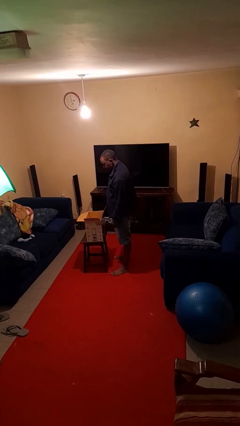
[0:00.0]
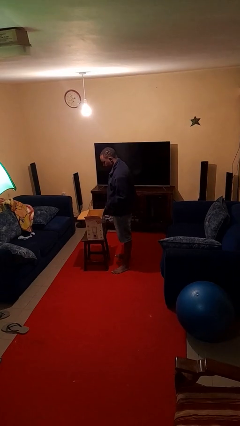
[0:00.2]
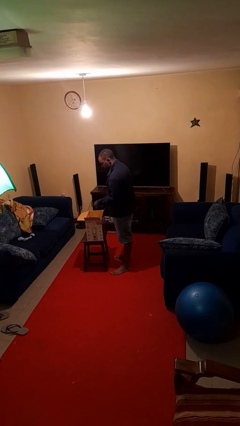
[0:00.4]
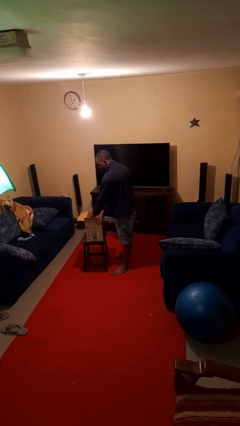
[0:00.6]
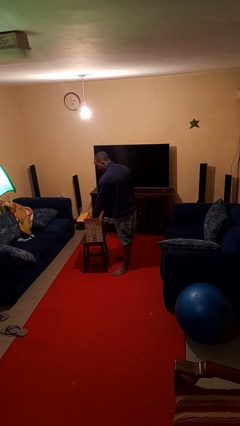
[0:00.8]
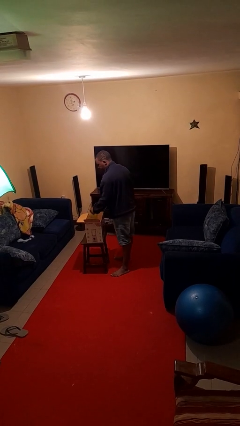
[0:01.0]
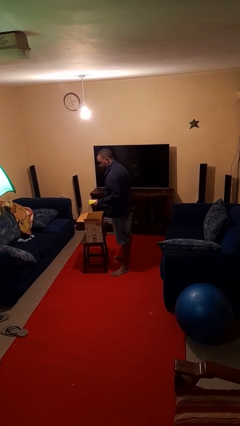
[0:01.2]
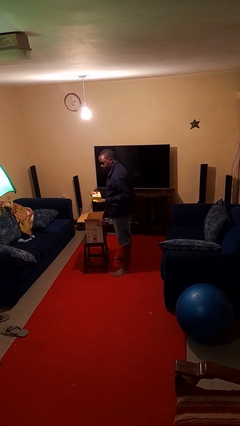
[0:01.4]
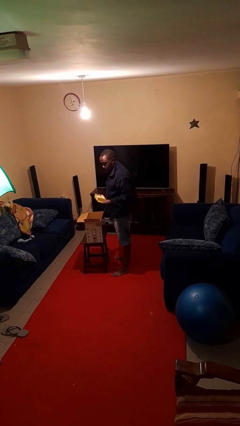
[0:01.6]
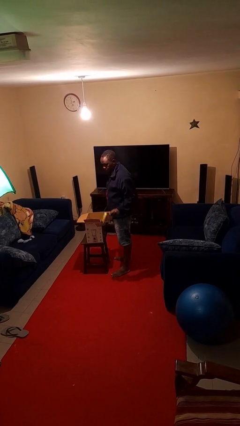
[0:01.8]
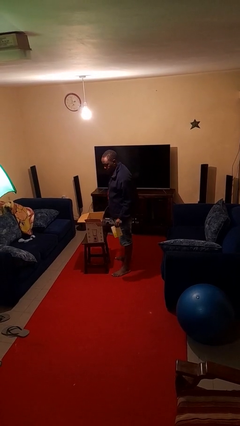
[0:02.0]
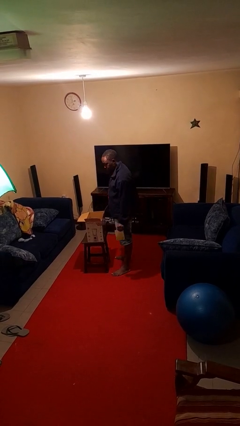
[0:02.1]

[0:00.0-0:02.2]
person takes object from box

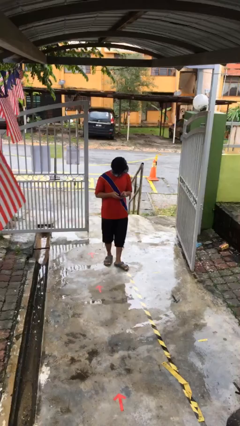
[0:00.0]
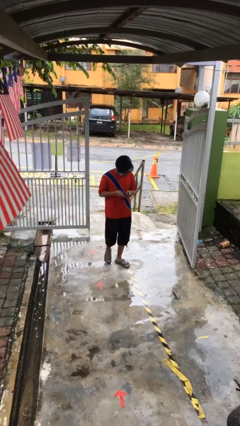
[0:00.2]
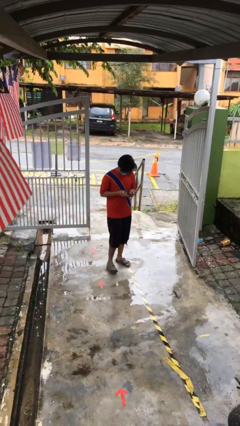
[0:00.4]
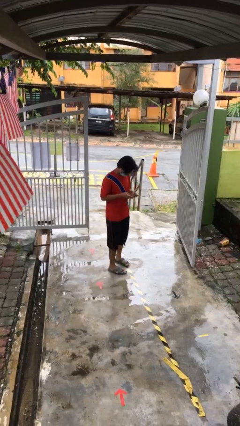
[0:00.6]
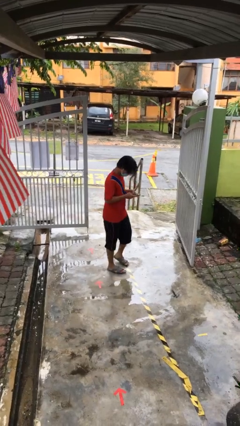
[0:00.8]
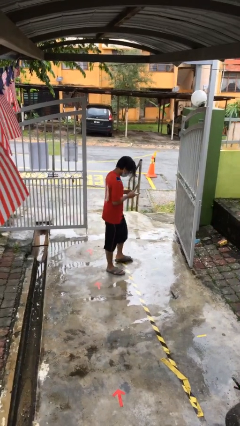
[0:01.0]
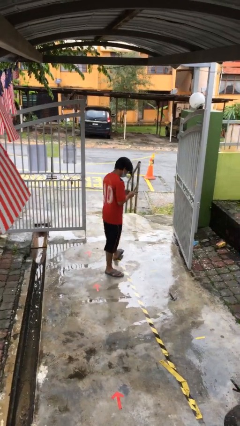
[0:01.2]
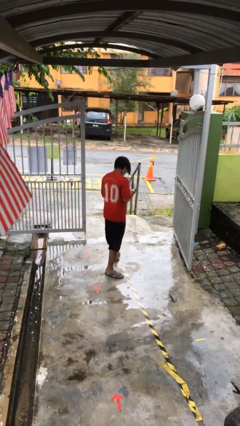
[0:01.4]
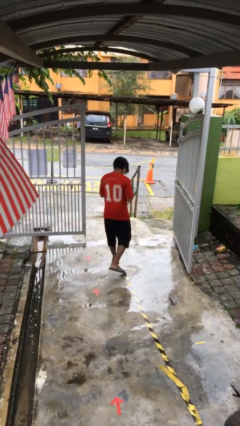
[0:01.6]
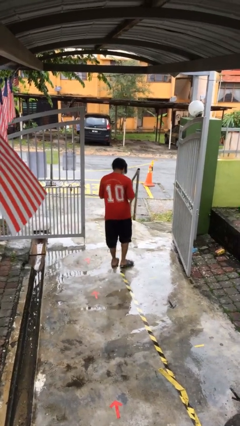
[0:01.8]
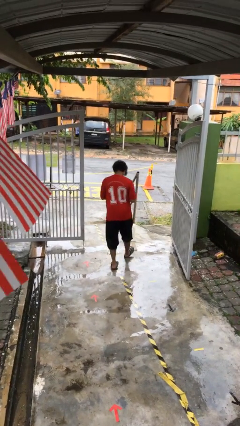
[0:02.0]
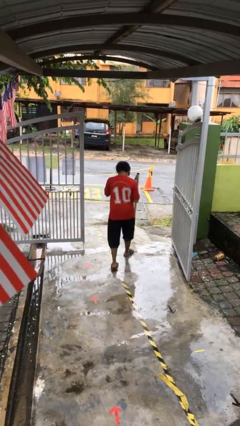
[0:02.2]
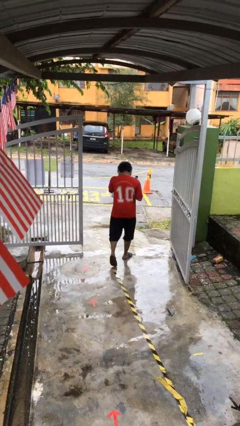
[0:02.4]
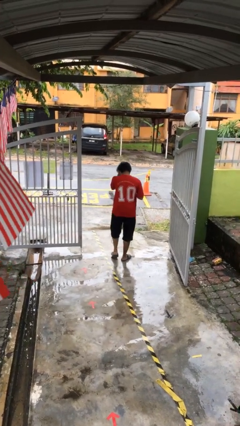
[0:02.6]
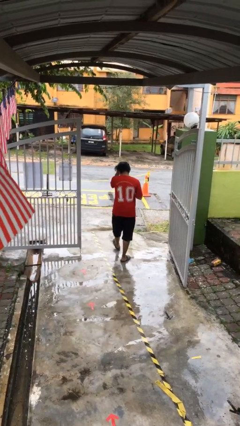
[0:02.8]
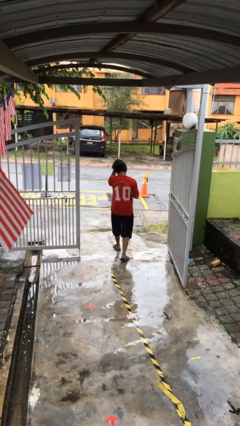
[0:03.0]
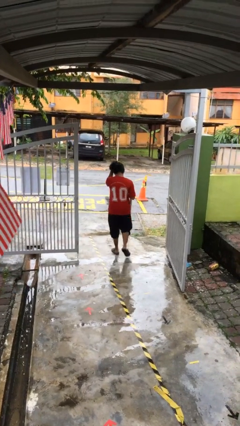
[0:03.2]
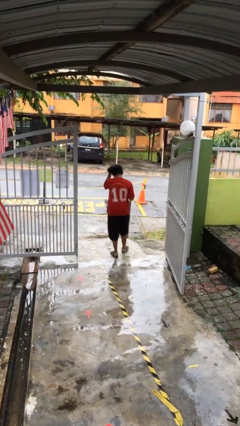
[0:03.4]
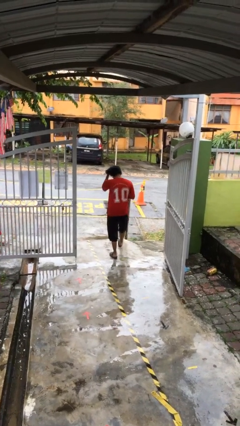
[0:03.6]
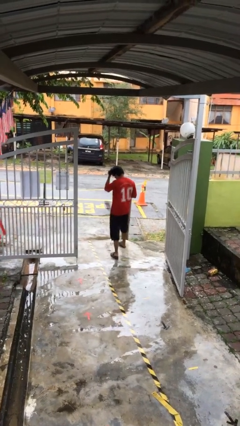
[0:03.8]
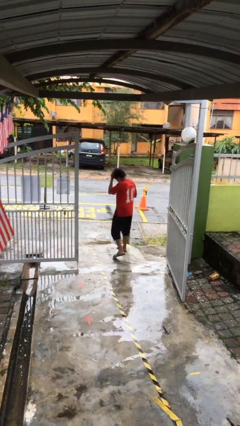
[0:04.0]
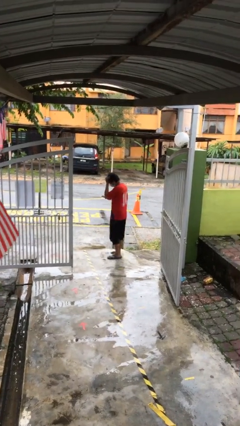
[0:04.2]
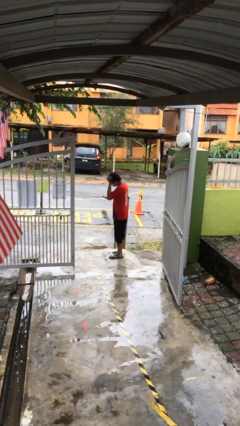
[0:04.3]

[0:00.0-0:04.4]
person exits scene through structure

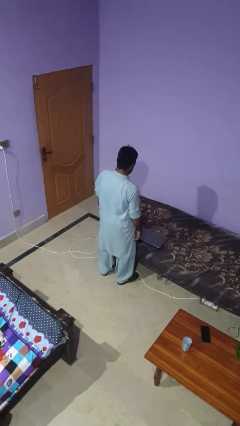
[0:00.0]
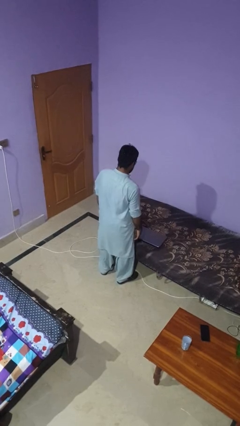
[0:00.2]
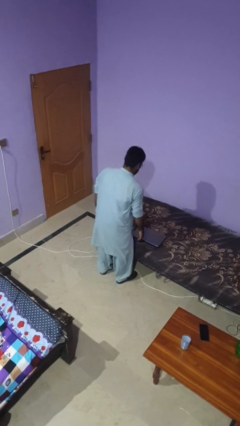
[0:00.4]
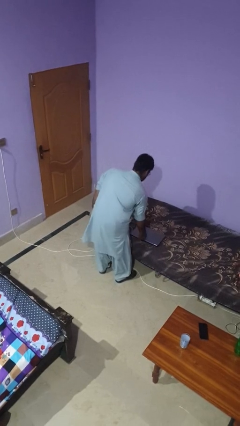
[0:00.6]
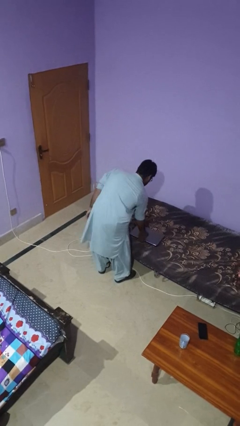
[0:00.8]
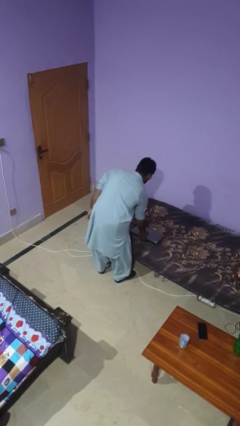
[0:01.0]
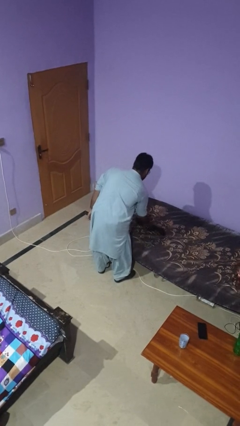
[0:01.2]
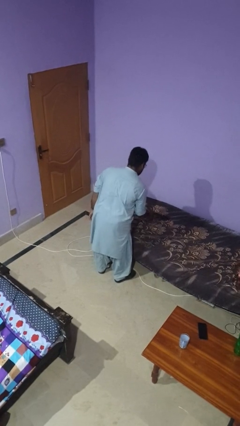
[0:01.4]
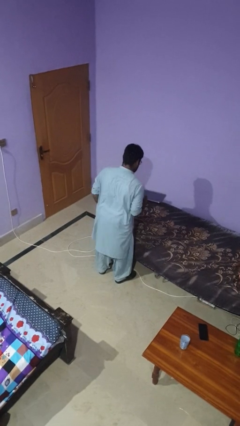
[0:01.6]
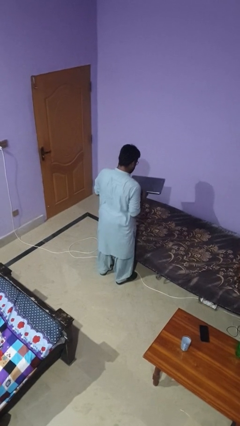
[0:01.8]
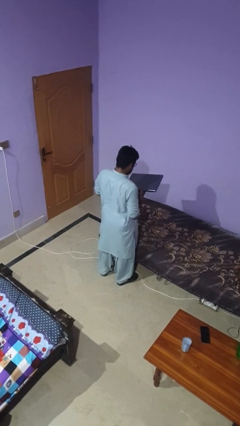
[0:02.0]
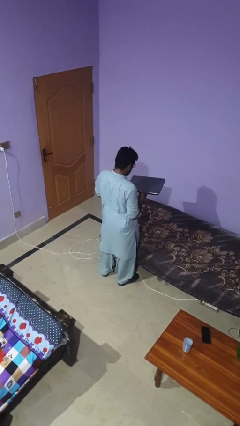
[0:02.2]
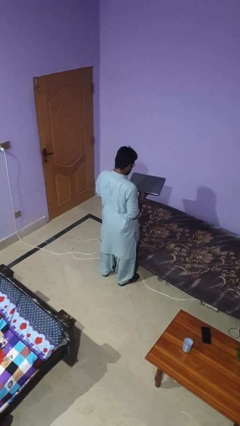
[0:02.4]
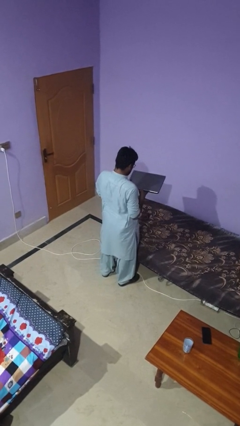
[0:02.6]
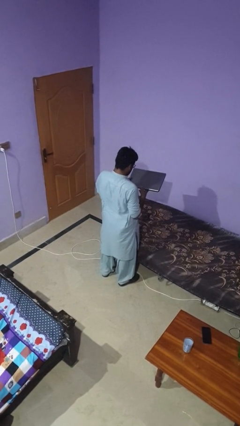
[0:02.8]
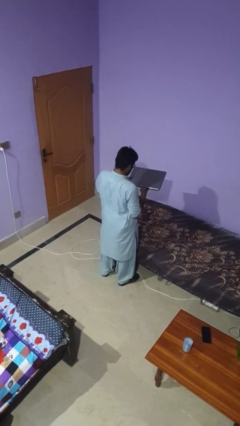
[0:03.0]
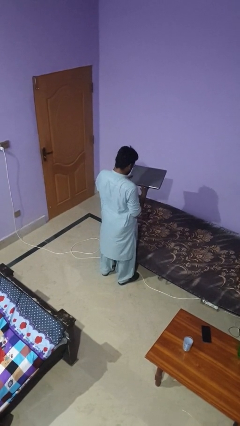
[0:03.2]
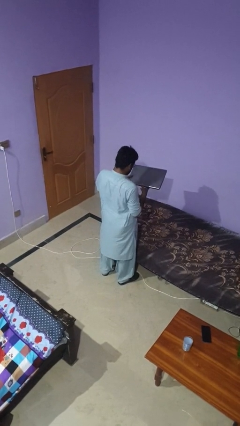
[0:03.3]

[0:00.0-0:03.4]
person picks up object from bed

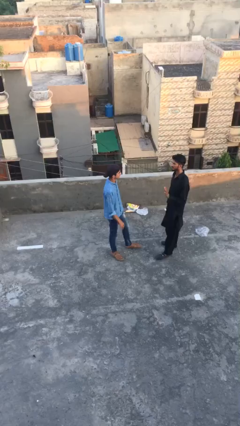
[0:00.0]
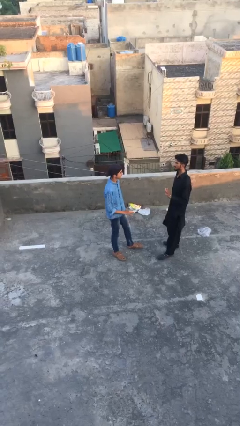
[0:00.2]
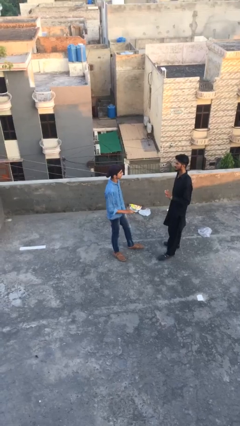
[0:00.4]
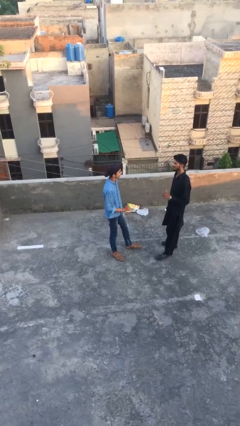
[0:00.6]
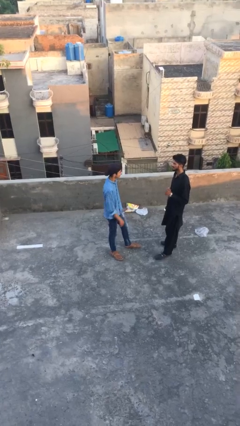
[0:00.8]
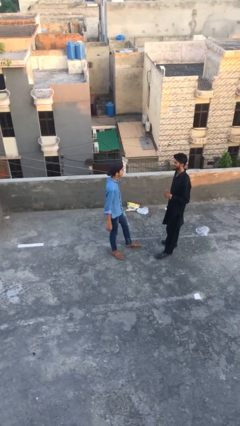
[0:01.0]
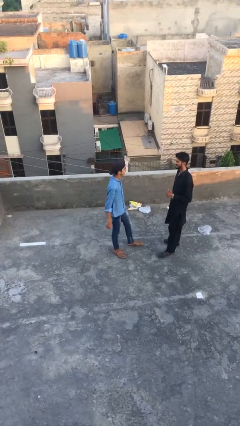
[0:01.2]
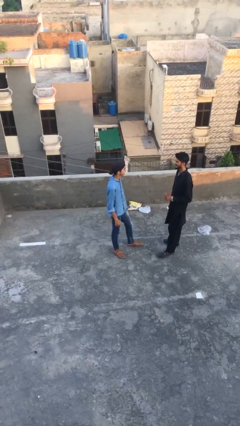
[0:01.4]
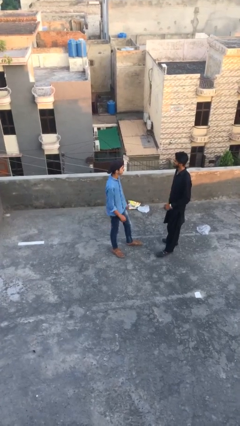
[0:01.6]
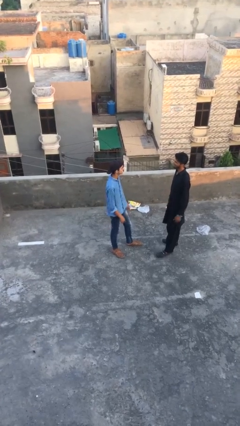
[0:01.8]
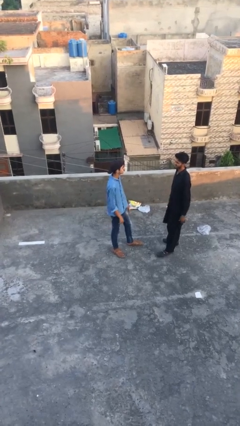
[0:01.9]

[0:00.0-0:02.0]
person talks to person

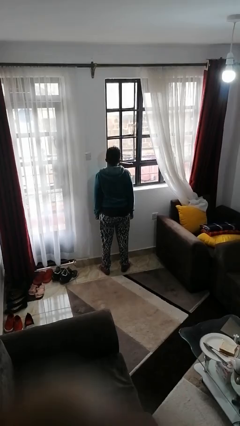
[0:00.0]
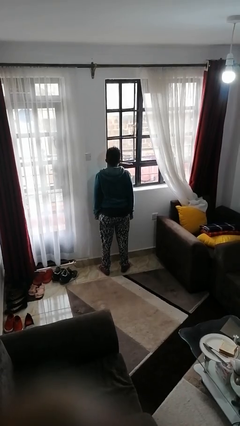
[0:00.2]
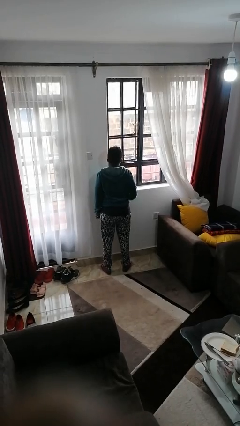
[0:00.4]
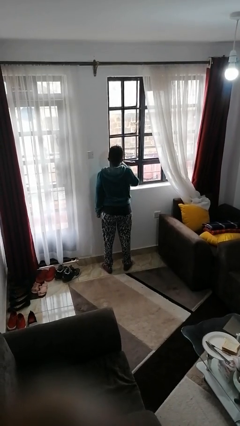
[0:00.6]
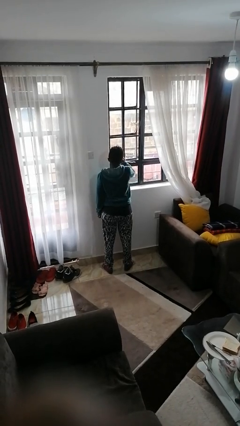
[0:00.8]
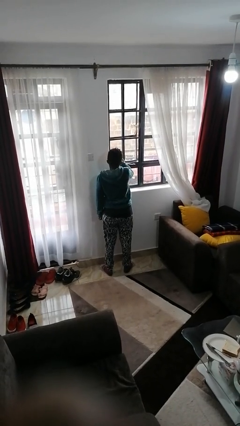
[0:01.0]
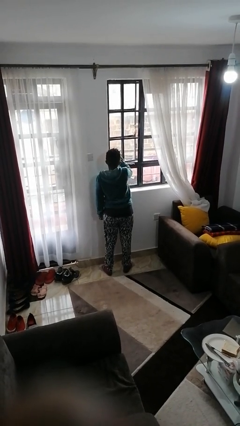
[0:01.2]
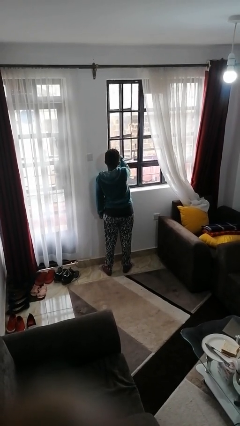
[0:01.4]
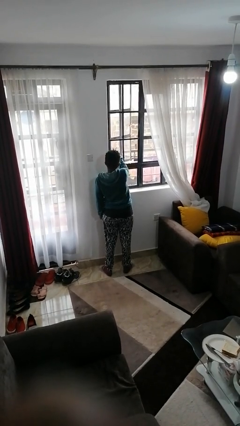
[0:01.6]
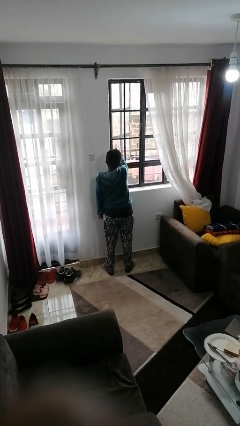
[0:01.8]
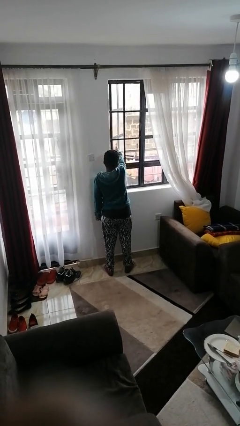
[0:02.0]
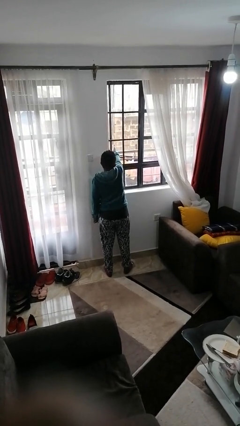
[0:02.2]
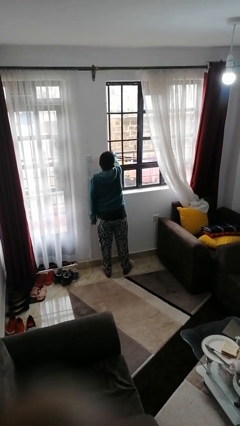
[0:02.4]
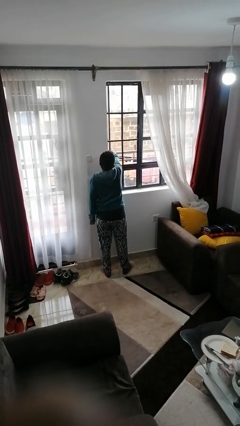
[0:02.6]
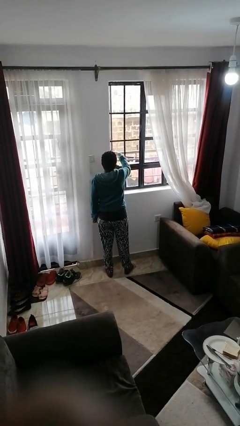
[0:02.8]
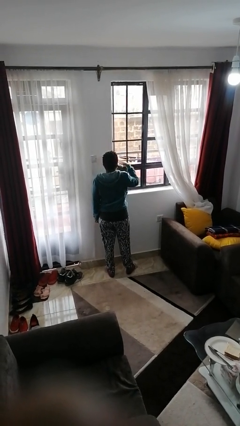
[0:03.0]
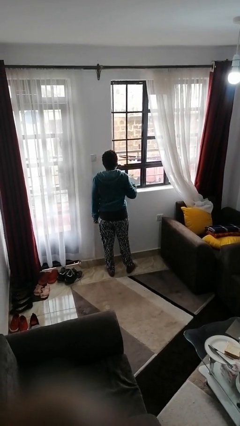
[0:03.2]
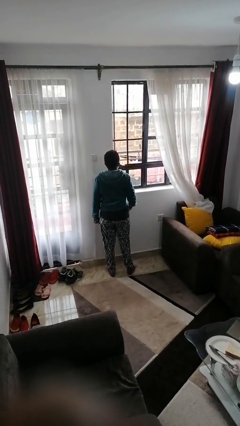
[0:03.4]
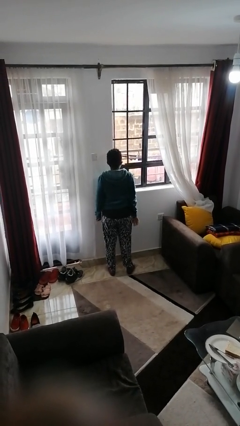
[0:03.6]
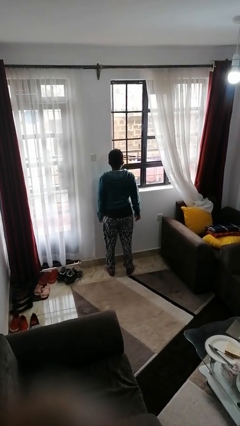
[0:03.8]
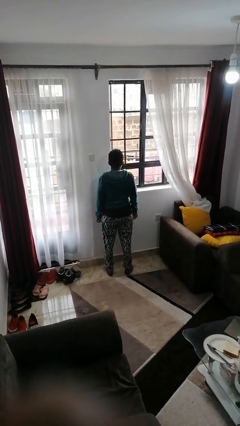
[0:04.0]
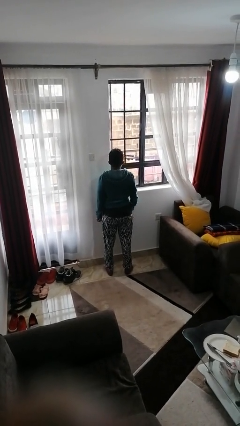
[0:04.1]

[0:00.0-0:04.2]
person opens home window

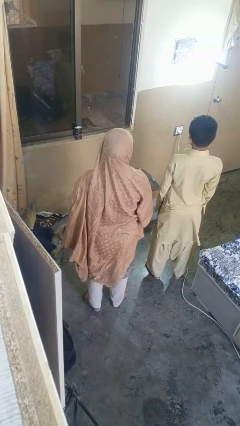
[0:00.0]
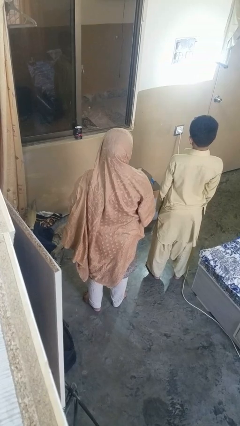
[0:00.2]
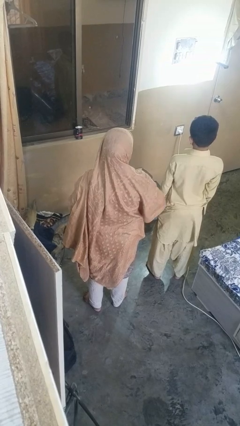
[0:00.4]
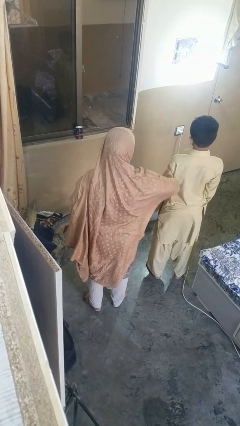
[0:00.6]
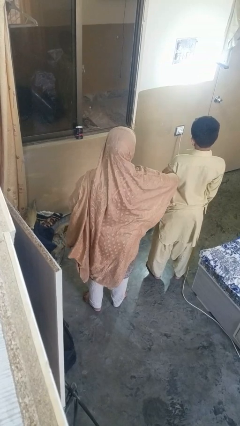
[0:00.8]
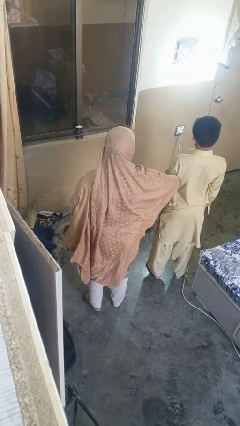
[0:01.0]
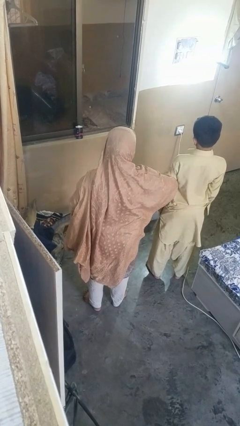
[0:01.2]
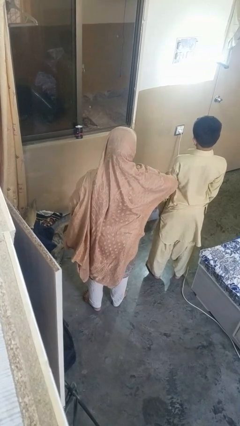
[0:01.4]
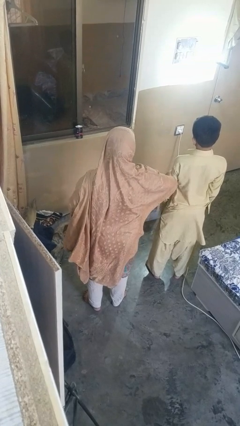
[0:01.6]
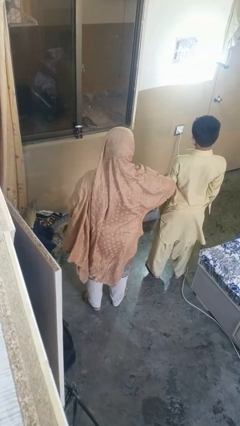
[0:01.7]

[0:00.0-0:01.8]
person grabs person by bicep
